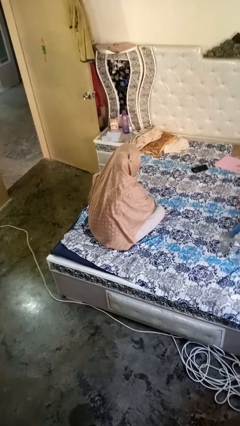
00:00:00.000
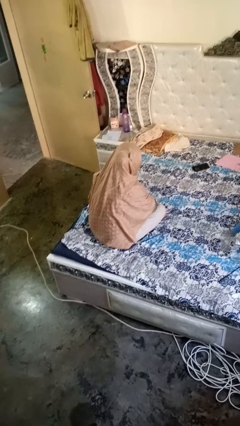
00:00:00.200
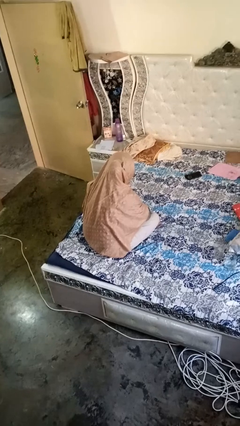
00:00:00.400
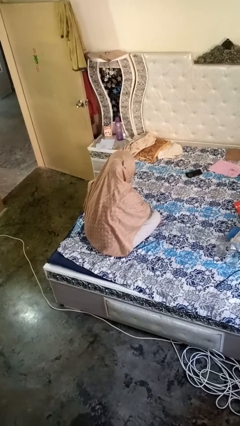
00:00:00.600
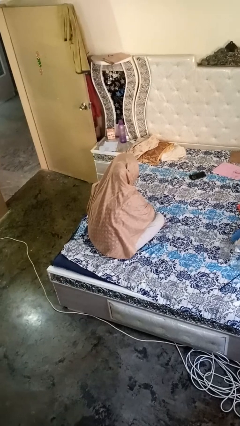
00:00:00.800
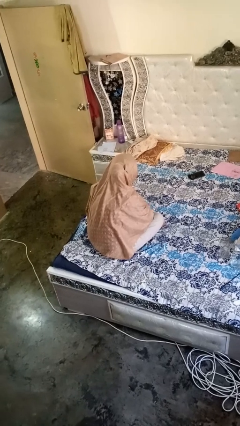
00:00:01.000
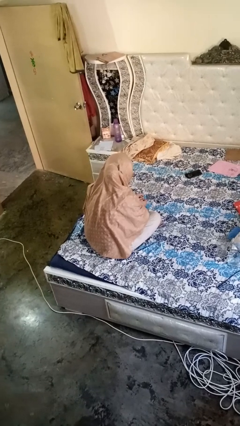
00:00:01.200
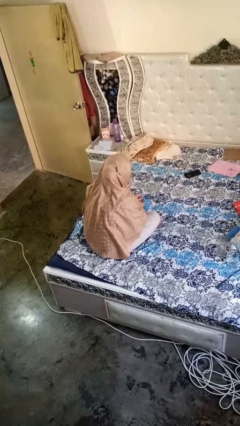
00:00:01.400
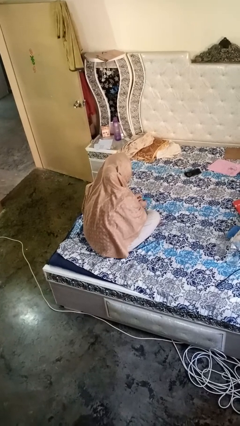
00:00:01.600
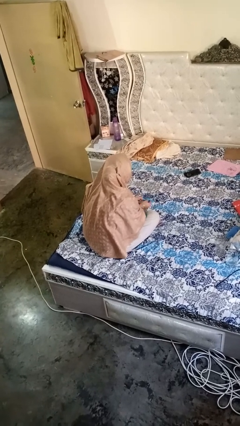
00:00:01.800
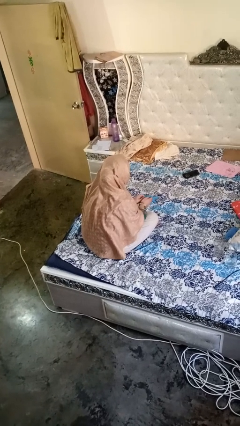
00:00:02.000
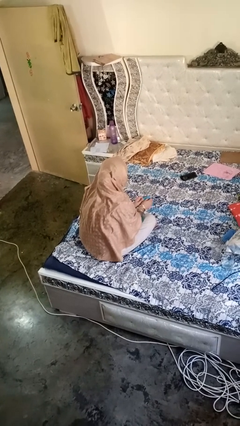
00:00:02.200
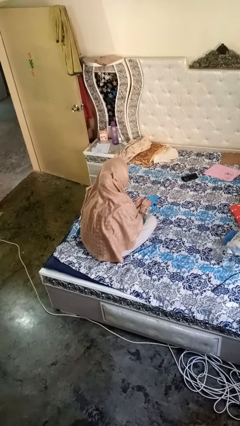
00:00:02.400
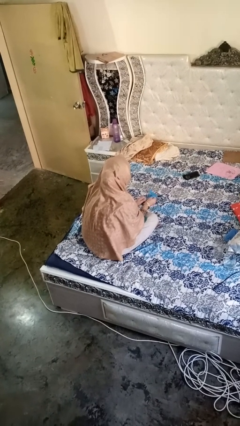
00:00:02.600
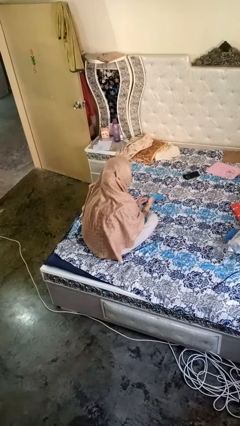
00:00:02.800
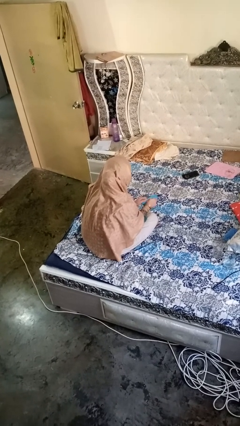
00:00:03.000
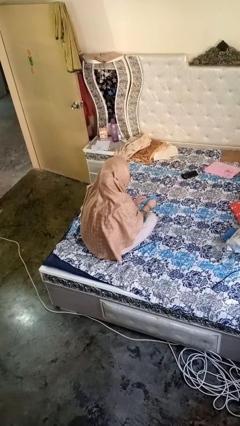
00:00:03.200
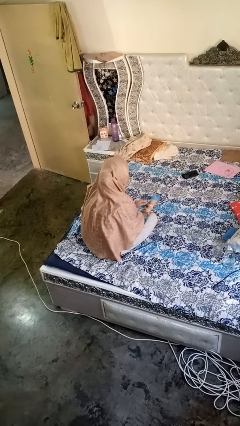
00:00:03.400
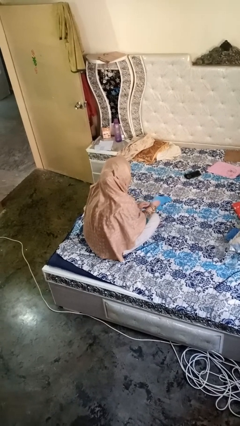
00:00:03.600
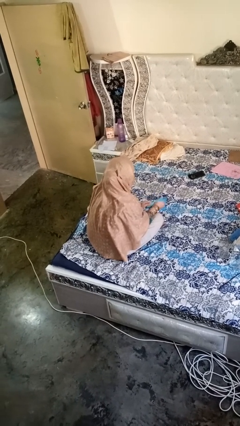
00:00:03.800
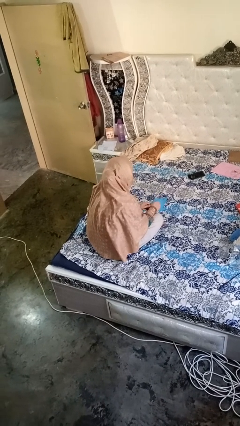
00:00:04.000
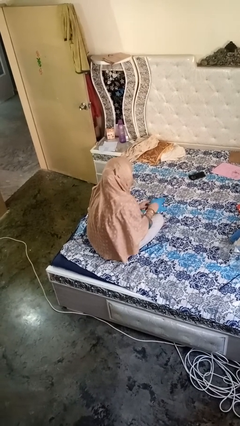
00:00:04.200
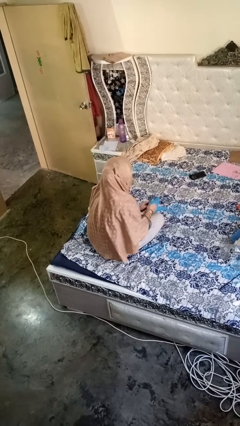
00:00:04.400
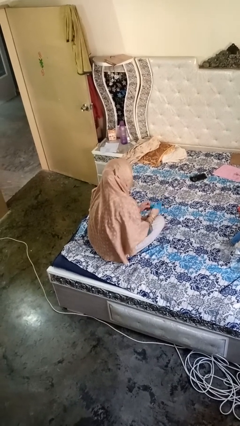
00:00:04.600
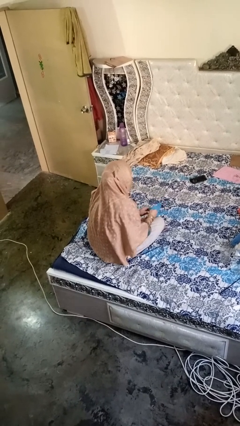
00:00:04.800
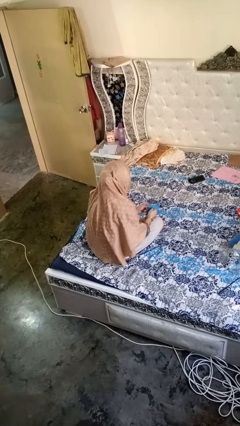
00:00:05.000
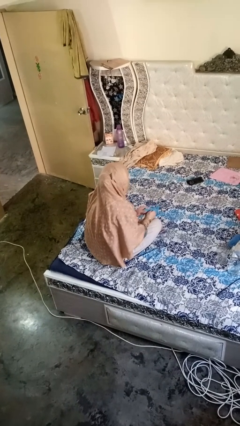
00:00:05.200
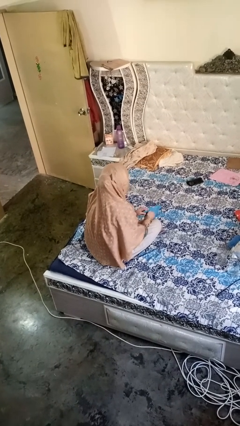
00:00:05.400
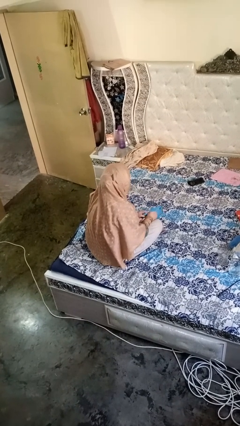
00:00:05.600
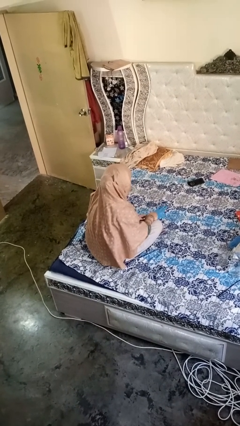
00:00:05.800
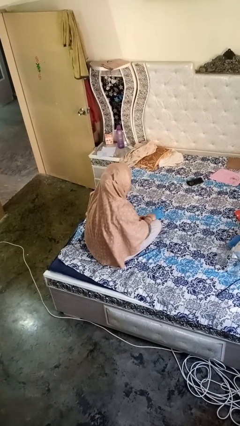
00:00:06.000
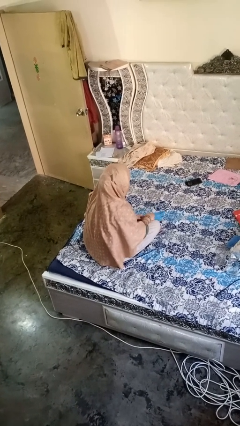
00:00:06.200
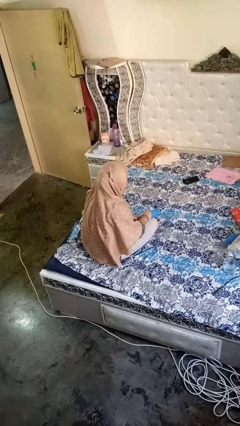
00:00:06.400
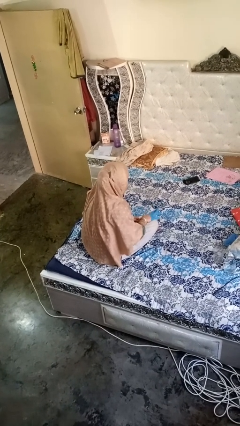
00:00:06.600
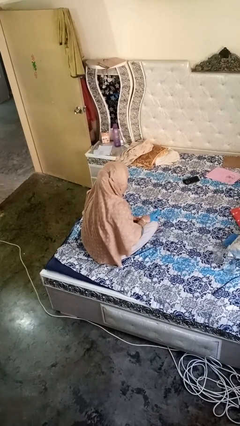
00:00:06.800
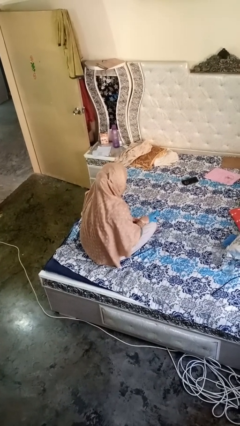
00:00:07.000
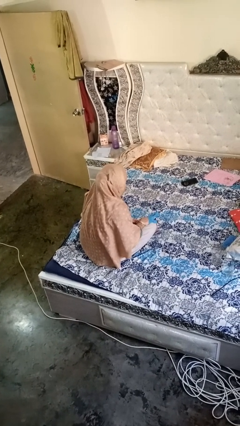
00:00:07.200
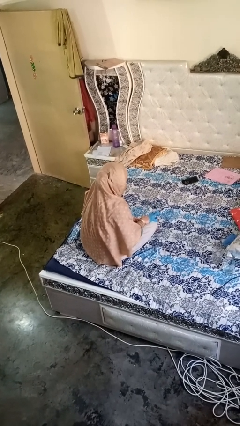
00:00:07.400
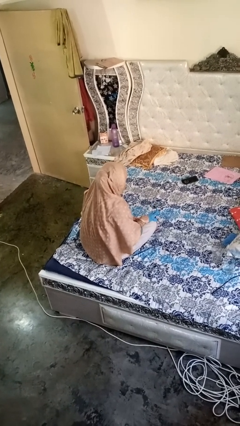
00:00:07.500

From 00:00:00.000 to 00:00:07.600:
person puts on gloves

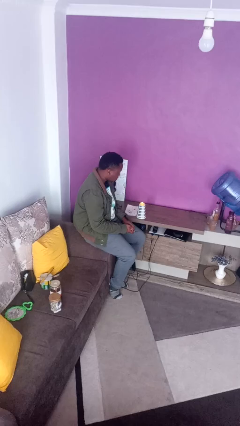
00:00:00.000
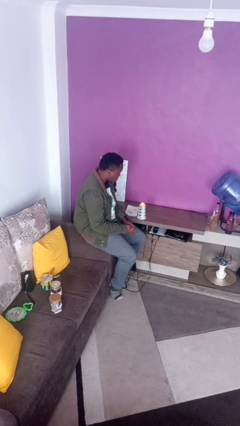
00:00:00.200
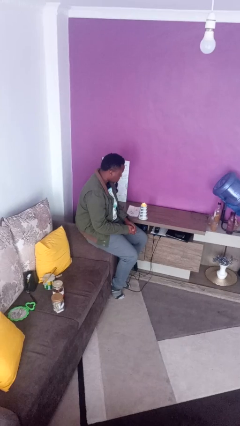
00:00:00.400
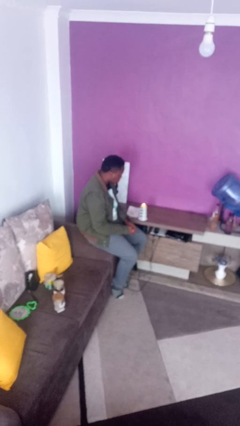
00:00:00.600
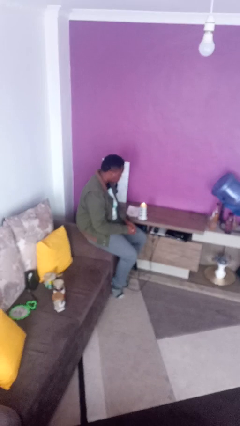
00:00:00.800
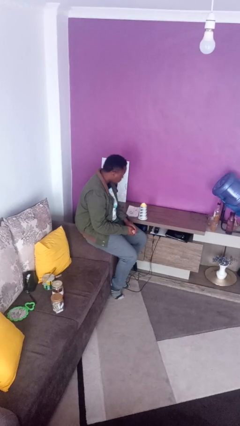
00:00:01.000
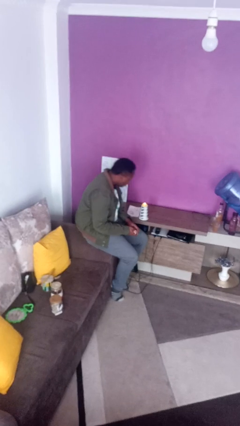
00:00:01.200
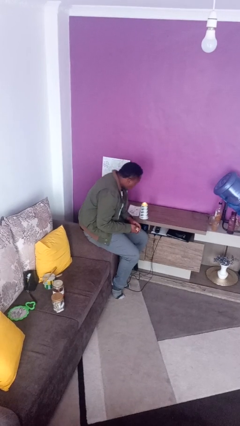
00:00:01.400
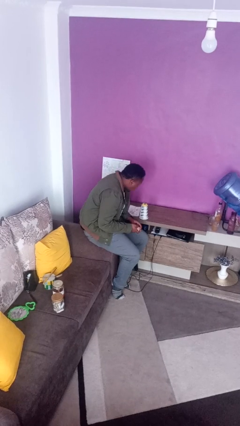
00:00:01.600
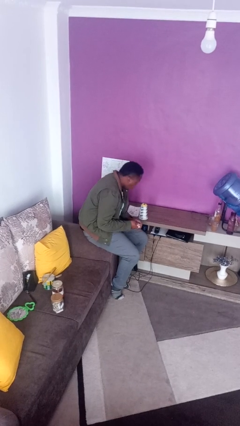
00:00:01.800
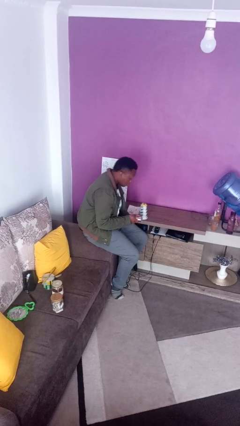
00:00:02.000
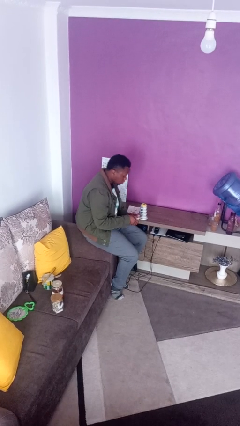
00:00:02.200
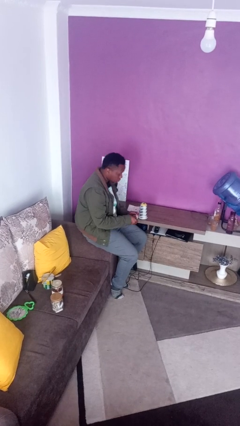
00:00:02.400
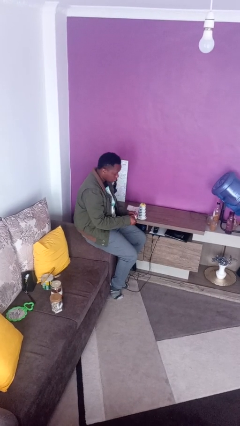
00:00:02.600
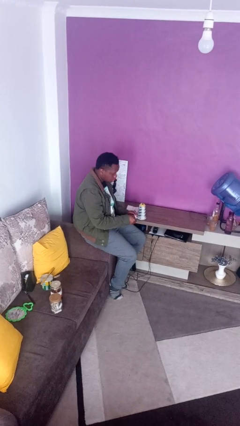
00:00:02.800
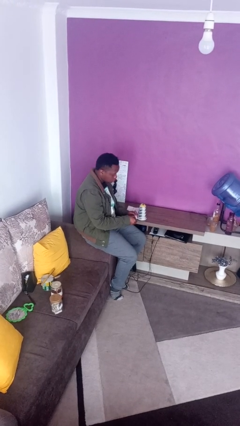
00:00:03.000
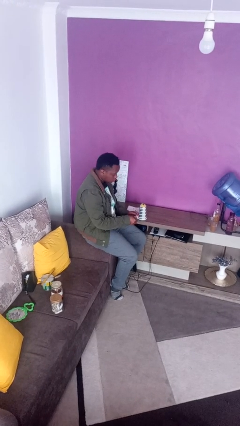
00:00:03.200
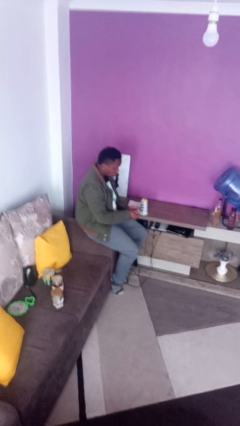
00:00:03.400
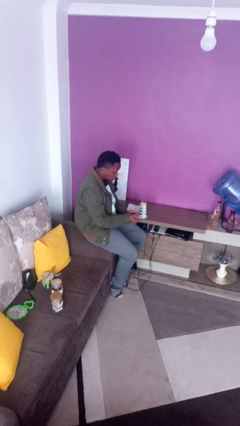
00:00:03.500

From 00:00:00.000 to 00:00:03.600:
person extinguishes candle

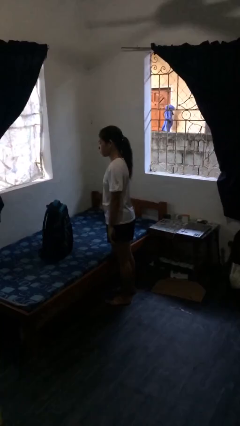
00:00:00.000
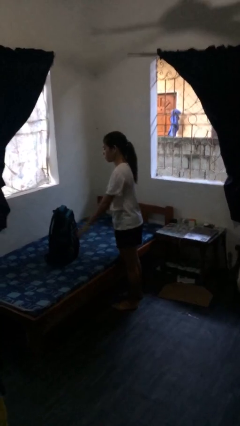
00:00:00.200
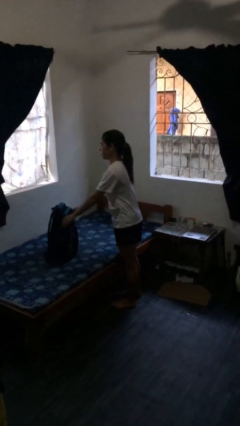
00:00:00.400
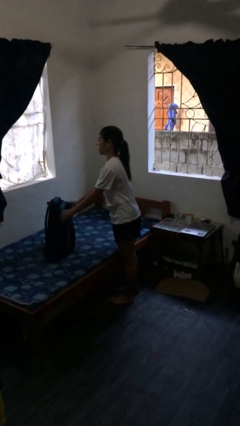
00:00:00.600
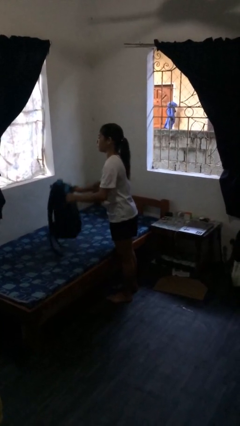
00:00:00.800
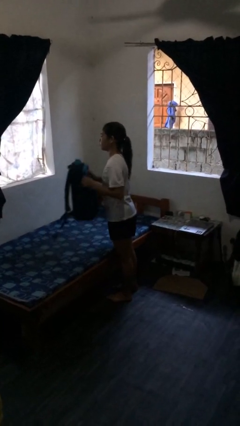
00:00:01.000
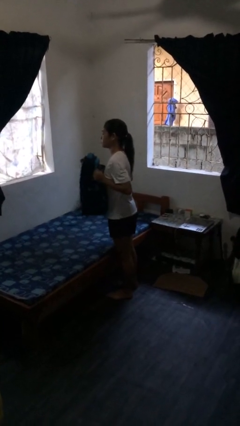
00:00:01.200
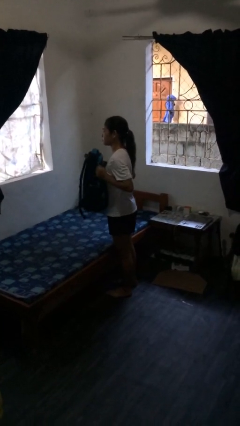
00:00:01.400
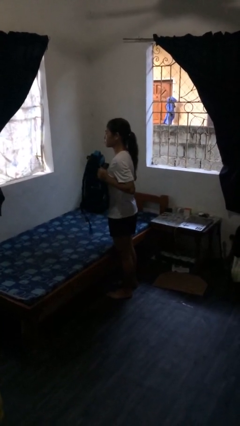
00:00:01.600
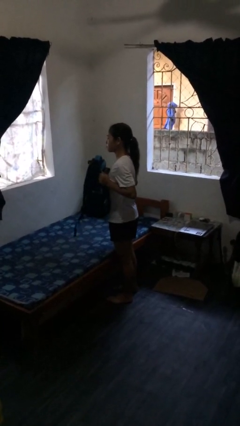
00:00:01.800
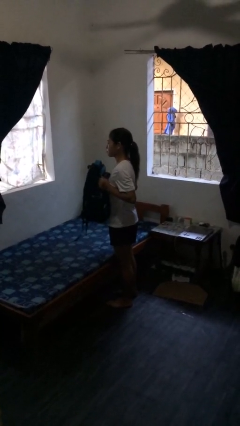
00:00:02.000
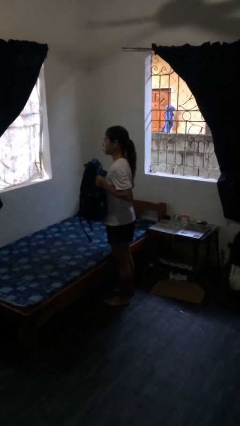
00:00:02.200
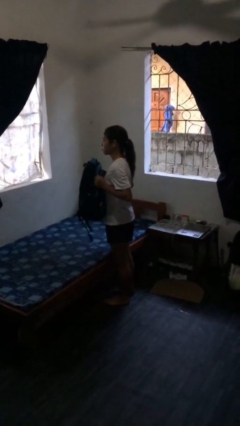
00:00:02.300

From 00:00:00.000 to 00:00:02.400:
person picks up object from bed

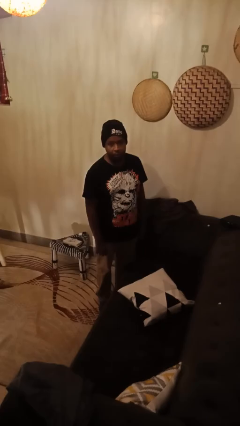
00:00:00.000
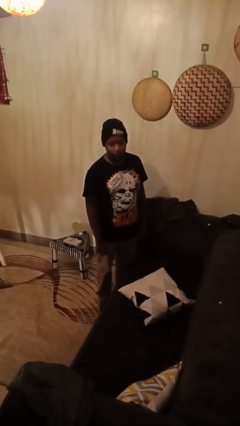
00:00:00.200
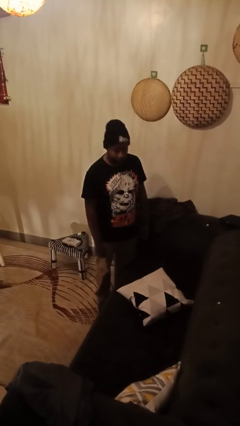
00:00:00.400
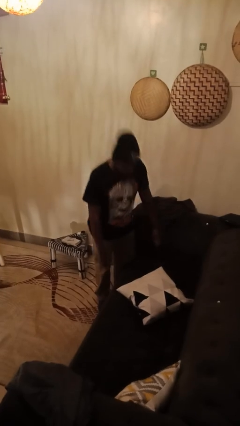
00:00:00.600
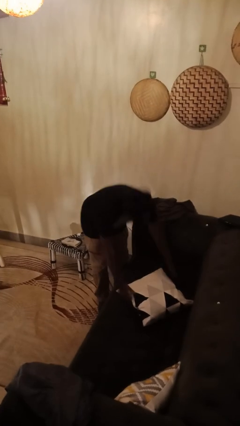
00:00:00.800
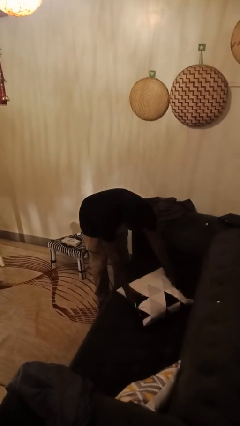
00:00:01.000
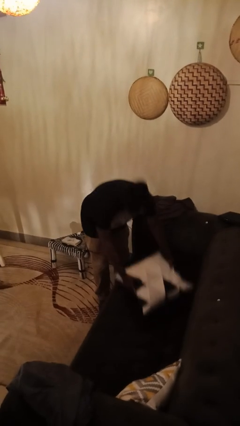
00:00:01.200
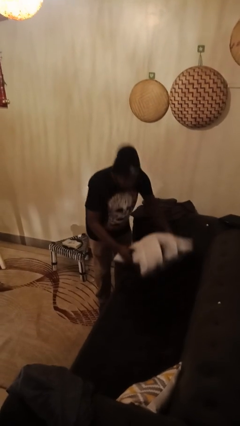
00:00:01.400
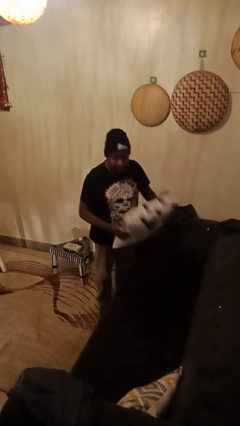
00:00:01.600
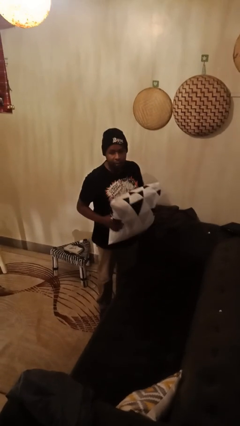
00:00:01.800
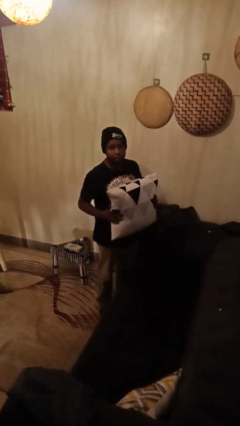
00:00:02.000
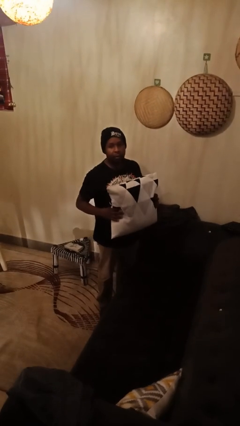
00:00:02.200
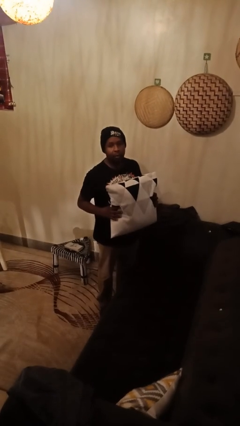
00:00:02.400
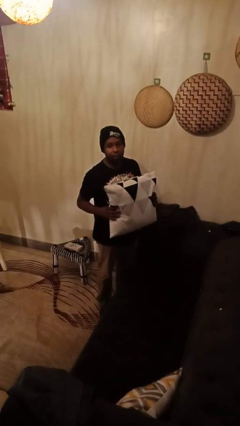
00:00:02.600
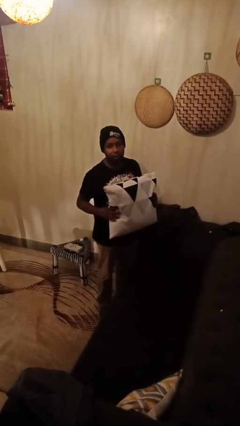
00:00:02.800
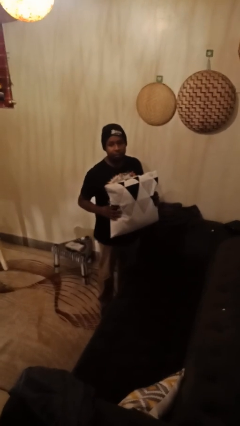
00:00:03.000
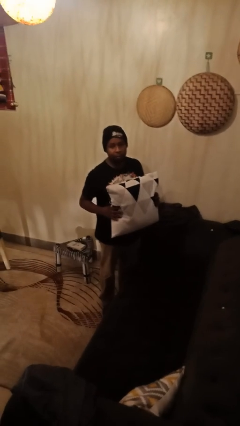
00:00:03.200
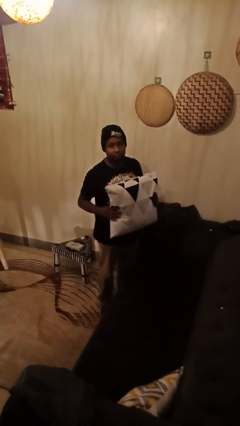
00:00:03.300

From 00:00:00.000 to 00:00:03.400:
person picks up object from couch

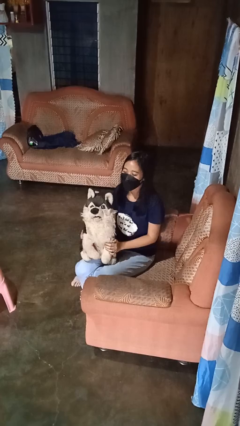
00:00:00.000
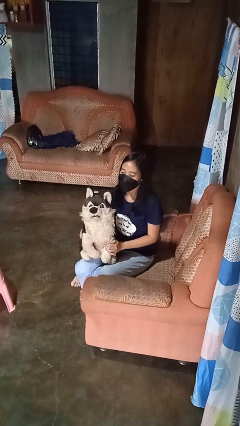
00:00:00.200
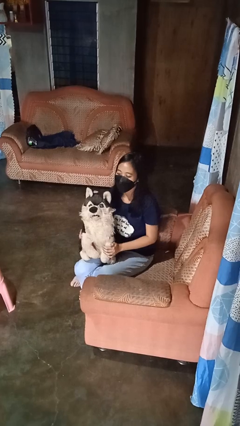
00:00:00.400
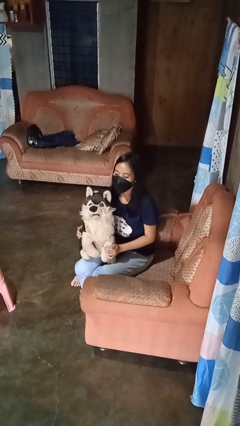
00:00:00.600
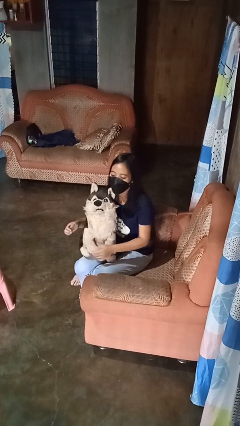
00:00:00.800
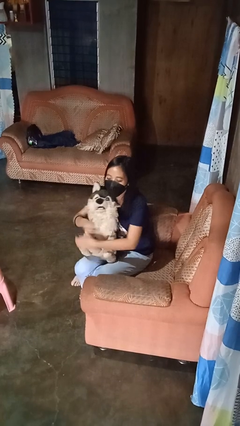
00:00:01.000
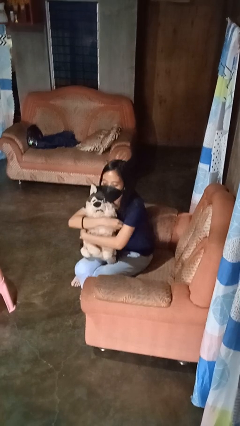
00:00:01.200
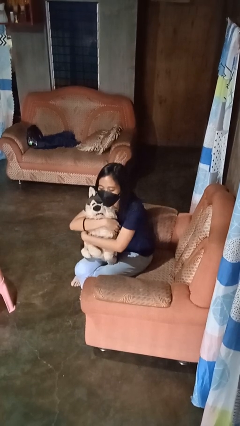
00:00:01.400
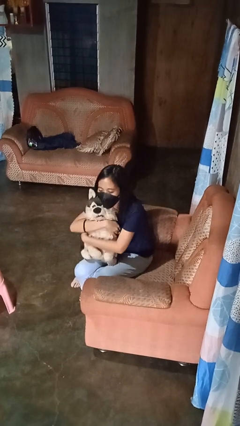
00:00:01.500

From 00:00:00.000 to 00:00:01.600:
person hugs stuffed animal
